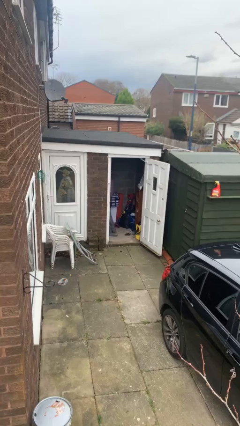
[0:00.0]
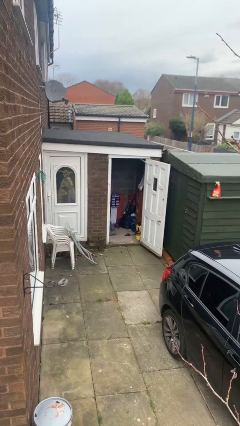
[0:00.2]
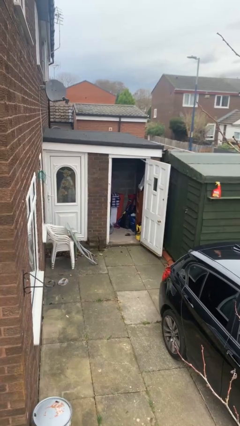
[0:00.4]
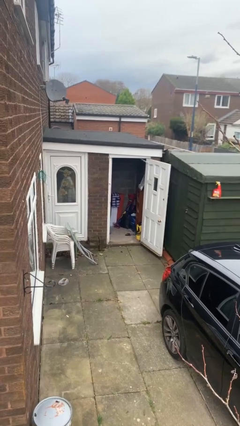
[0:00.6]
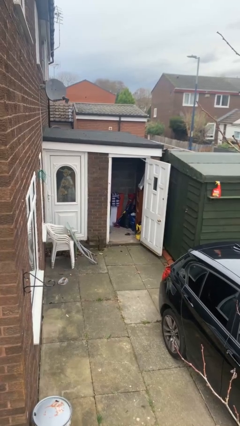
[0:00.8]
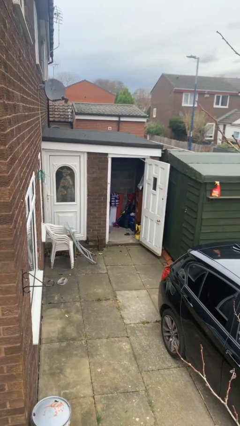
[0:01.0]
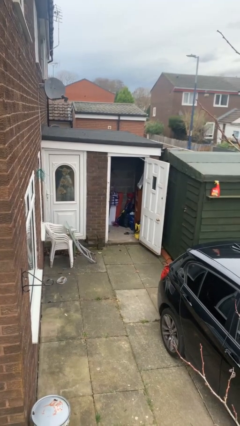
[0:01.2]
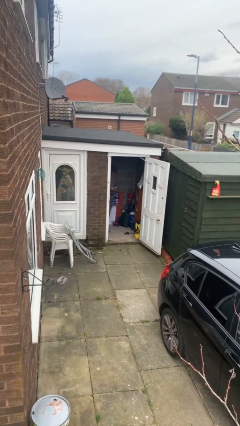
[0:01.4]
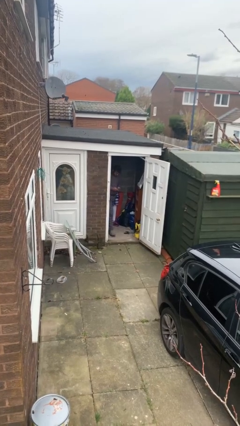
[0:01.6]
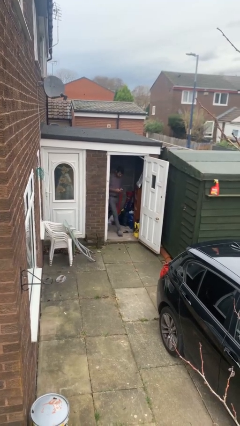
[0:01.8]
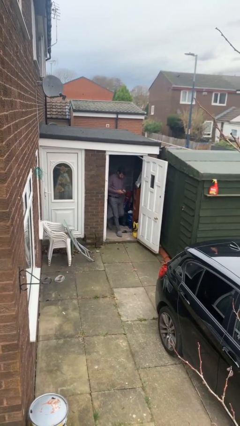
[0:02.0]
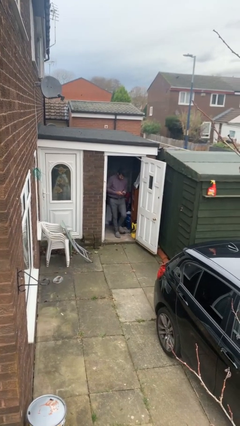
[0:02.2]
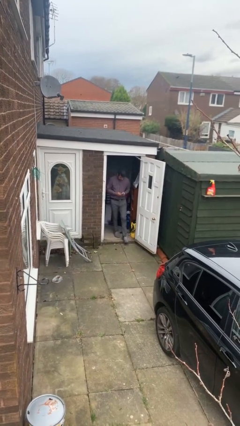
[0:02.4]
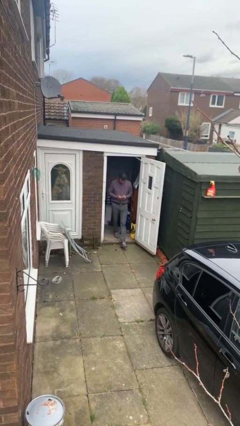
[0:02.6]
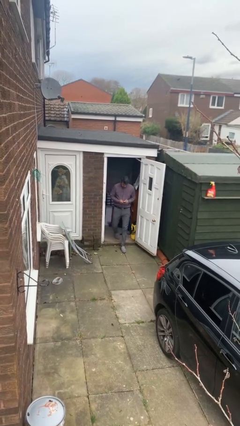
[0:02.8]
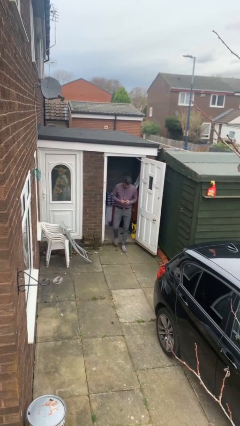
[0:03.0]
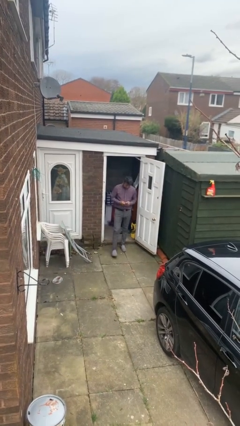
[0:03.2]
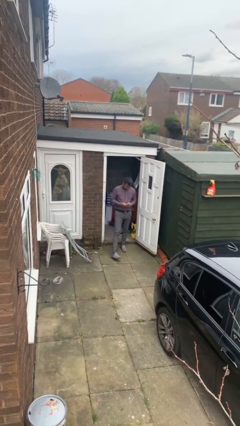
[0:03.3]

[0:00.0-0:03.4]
person enters scene through structure

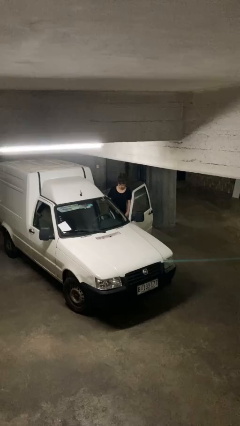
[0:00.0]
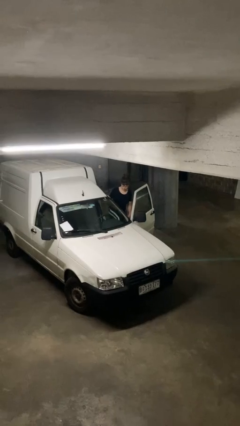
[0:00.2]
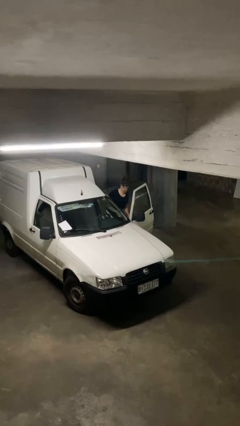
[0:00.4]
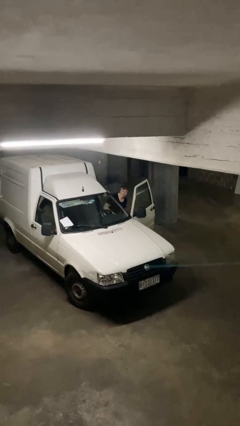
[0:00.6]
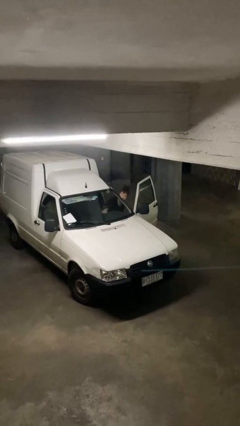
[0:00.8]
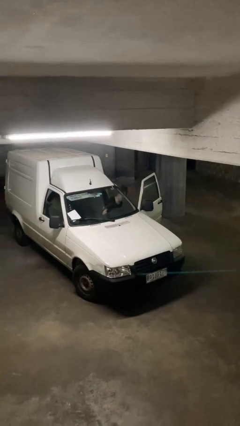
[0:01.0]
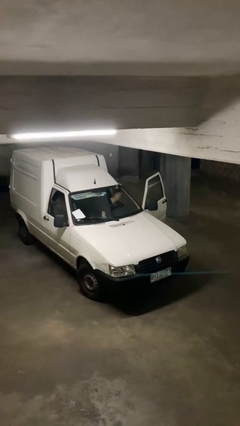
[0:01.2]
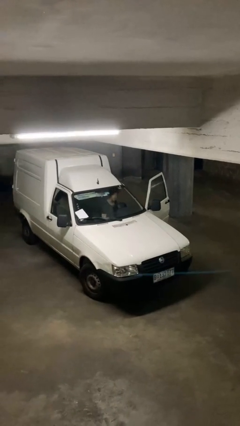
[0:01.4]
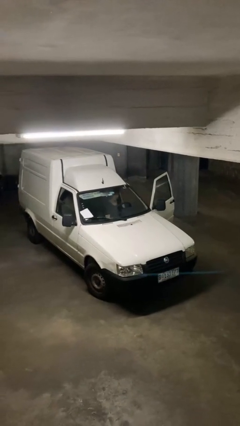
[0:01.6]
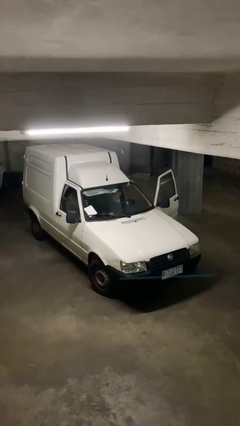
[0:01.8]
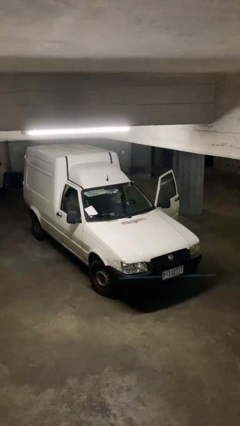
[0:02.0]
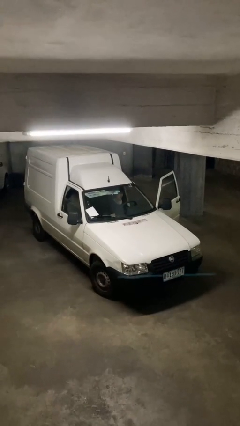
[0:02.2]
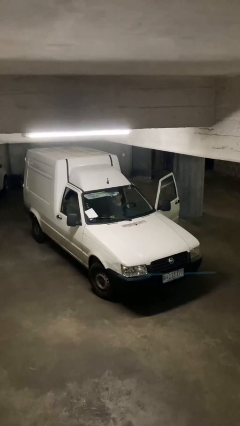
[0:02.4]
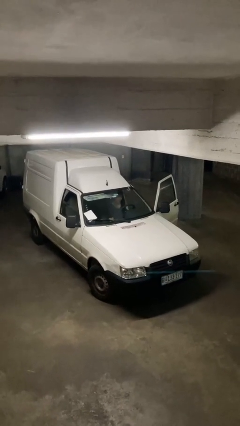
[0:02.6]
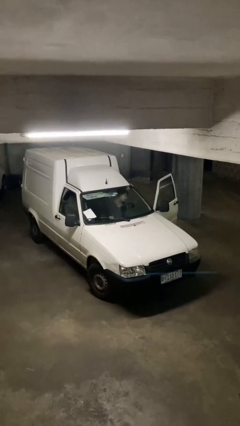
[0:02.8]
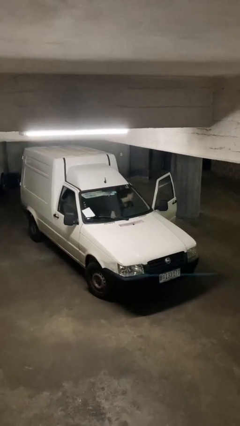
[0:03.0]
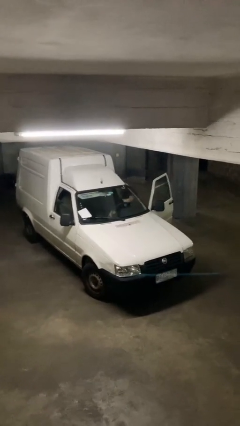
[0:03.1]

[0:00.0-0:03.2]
person enters car

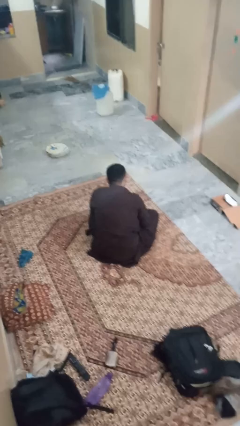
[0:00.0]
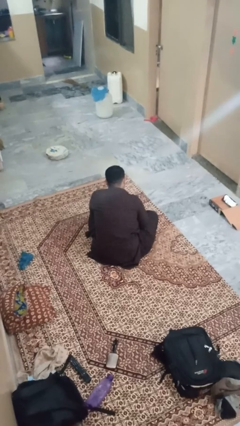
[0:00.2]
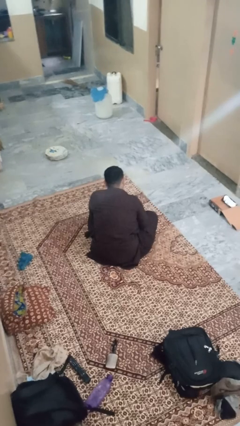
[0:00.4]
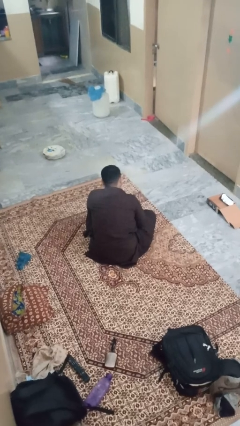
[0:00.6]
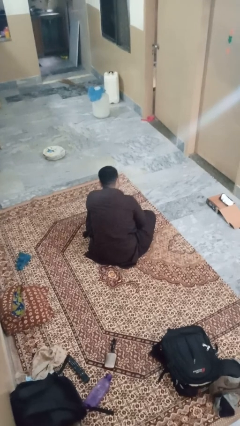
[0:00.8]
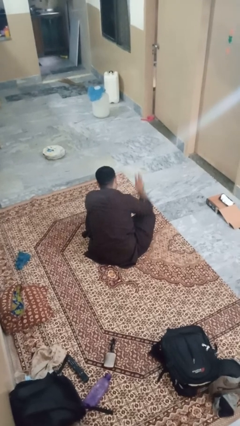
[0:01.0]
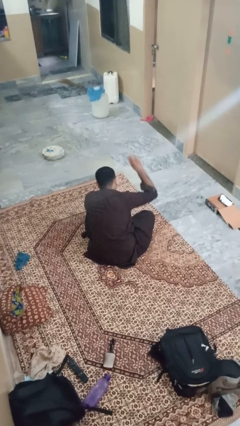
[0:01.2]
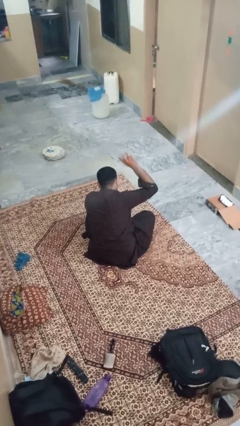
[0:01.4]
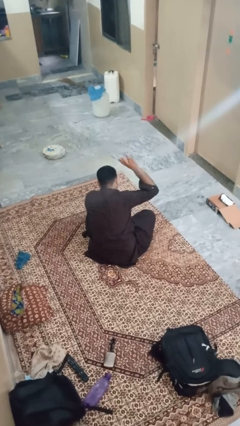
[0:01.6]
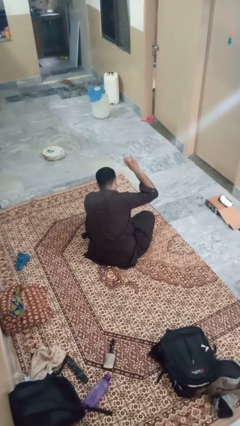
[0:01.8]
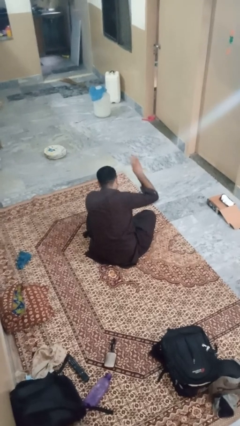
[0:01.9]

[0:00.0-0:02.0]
person gestures number three

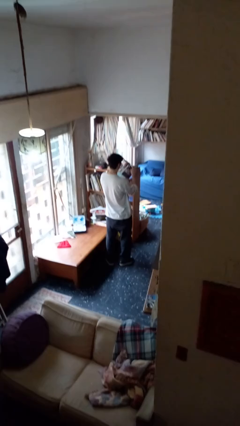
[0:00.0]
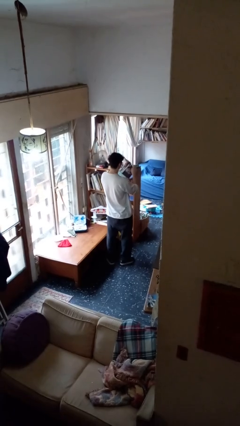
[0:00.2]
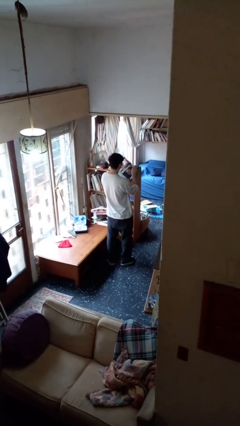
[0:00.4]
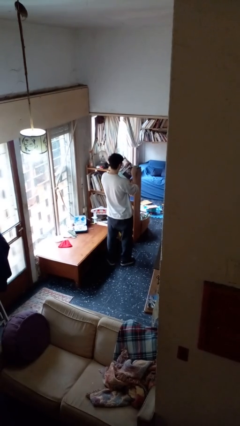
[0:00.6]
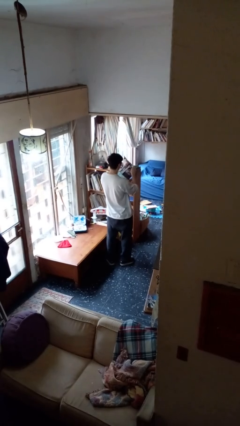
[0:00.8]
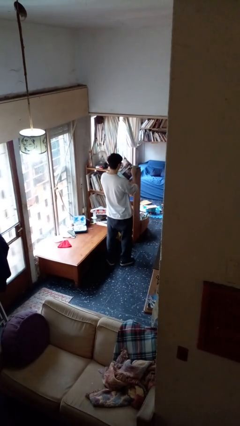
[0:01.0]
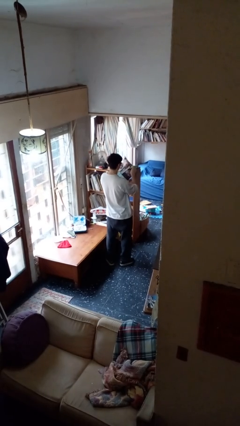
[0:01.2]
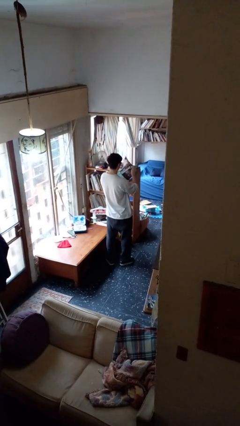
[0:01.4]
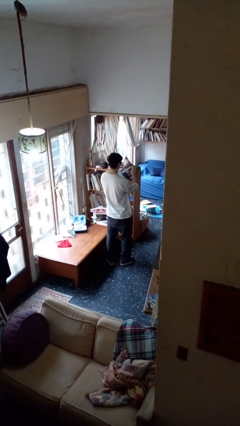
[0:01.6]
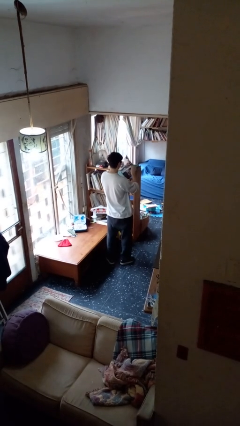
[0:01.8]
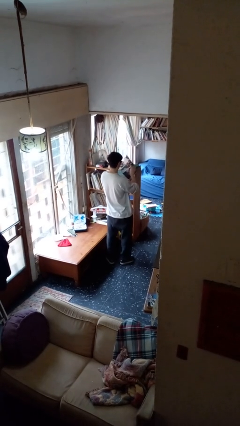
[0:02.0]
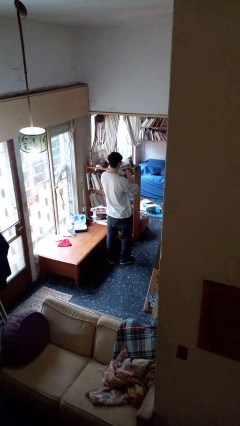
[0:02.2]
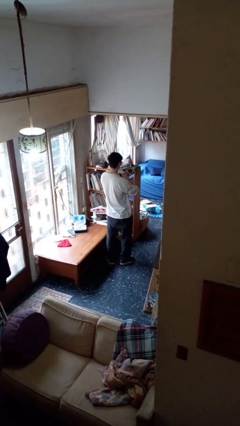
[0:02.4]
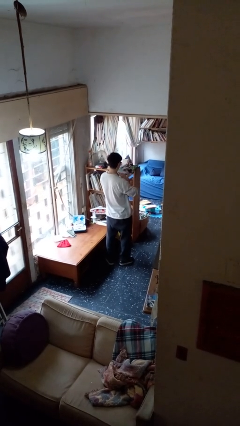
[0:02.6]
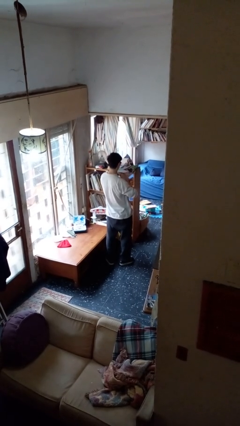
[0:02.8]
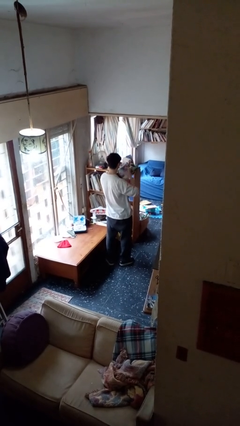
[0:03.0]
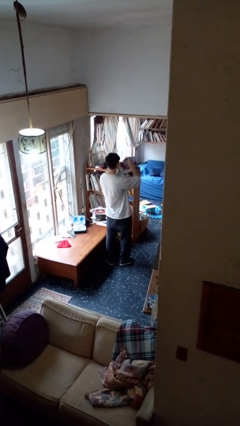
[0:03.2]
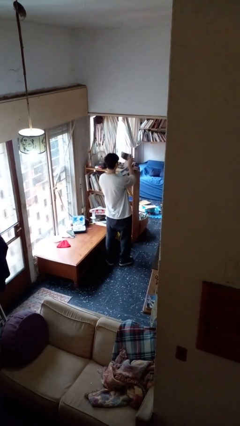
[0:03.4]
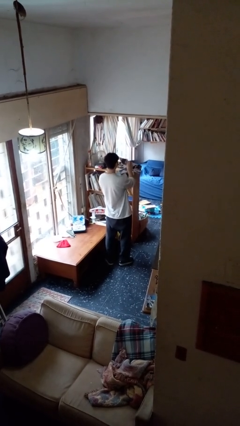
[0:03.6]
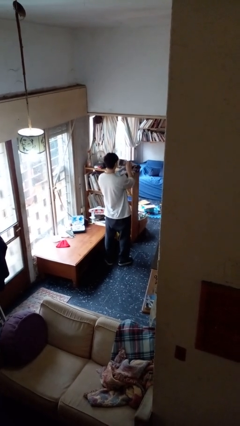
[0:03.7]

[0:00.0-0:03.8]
person tears paper

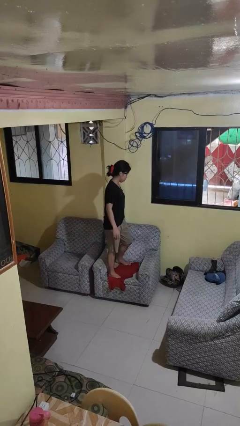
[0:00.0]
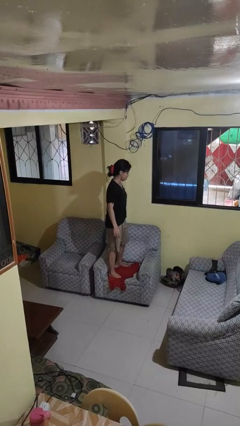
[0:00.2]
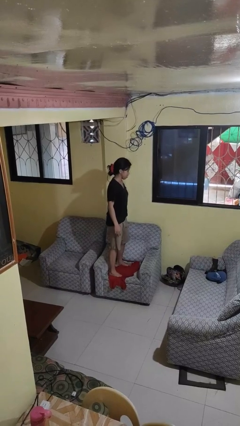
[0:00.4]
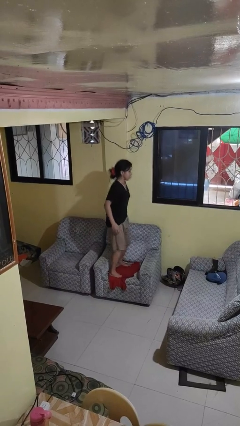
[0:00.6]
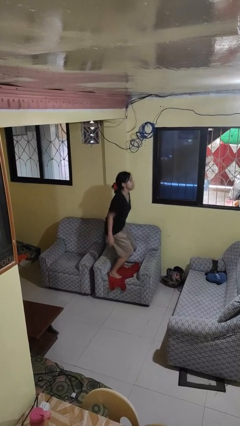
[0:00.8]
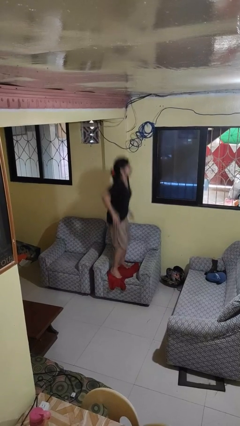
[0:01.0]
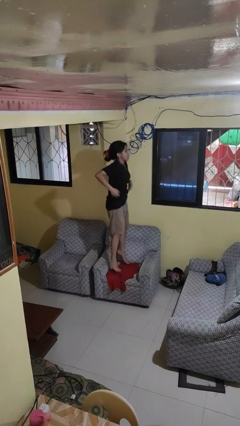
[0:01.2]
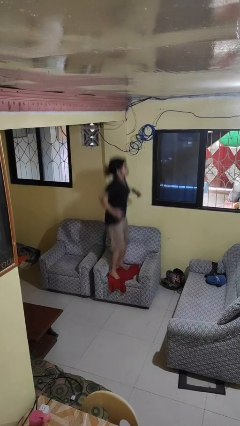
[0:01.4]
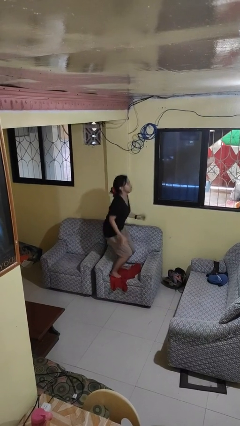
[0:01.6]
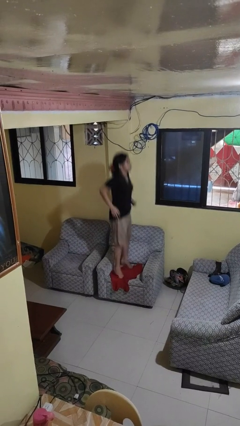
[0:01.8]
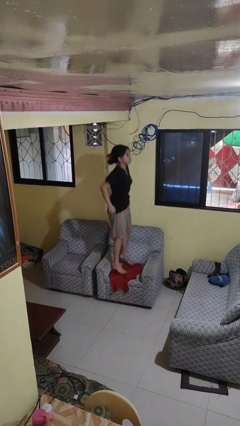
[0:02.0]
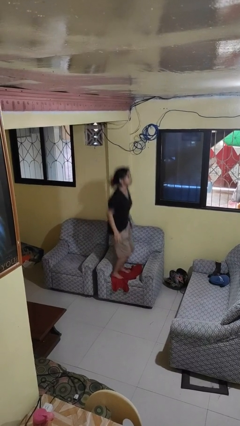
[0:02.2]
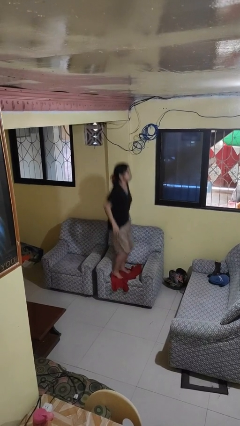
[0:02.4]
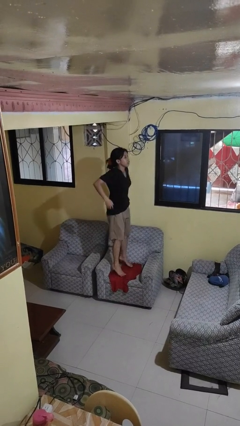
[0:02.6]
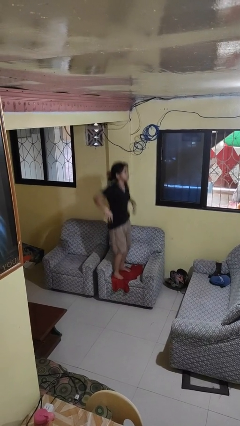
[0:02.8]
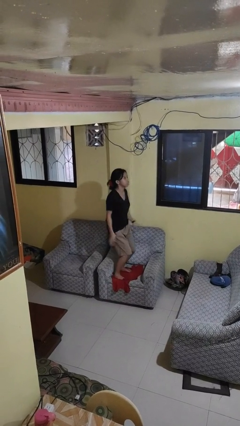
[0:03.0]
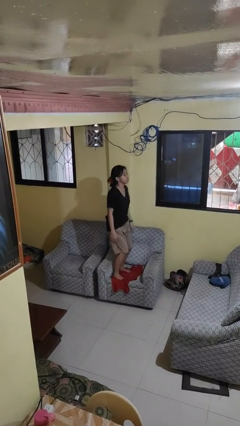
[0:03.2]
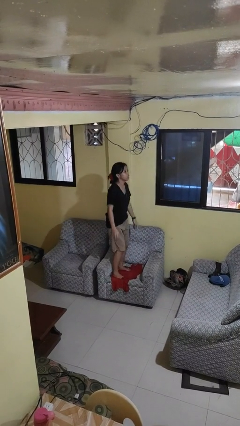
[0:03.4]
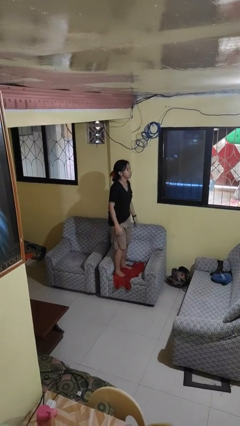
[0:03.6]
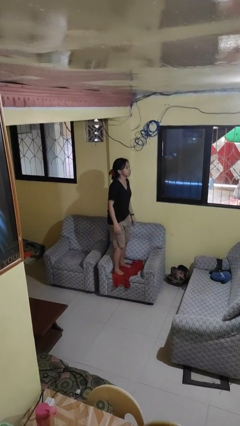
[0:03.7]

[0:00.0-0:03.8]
person jumps on couch

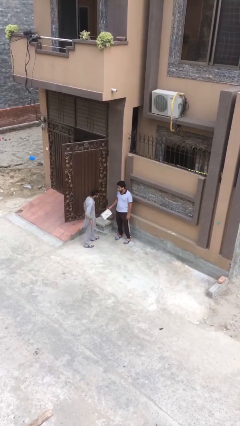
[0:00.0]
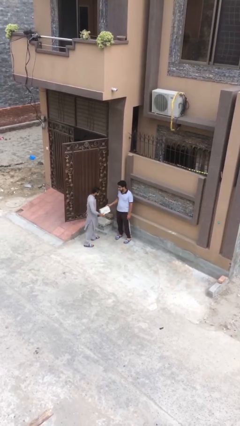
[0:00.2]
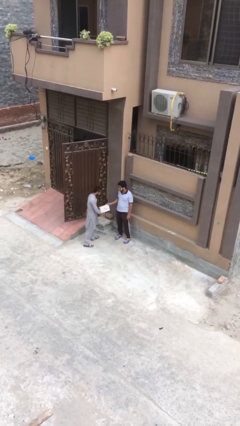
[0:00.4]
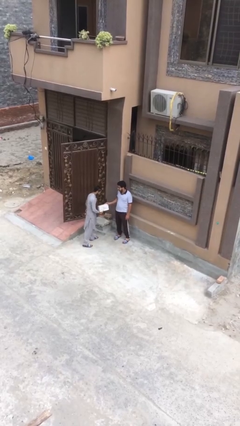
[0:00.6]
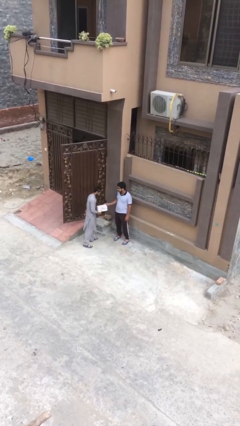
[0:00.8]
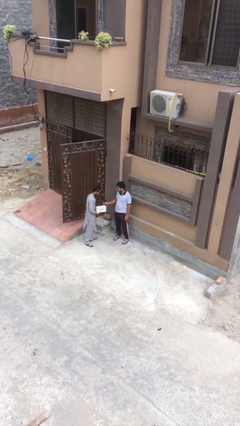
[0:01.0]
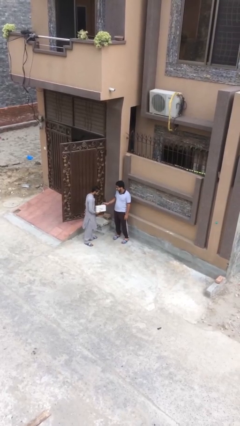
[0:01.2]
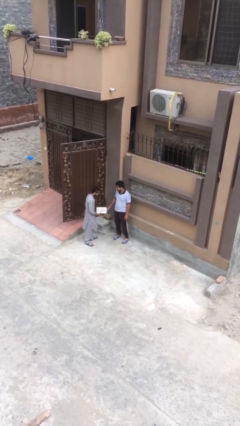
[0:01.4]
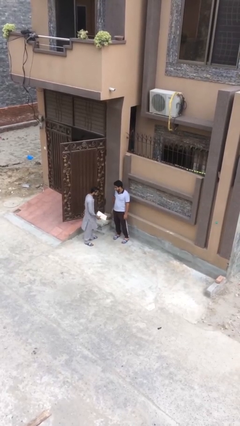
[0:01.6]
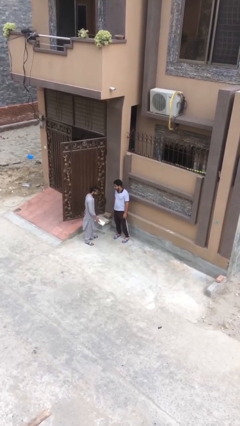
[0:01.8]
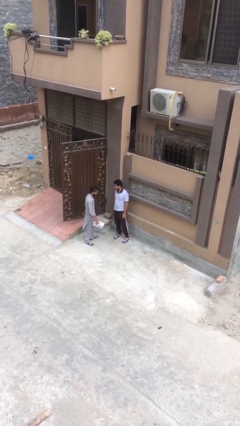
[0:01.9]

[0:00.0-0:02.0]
person transfers object to person
